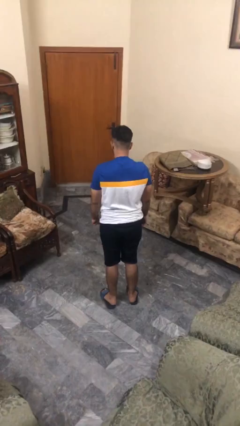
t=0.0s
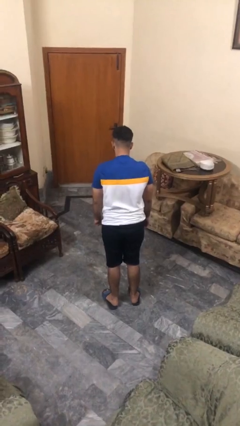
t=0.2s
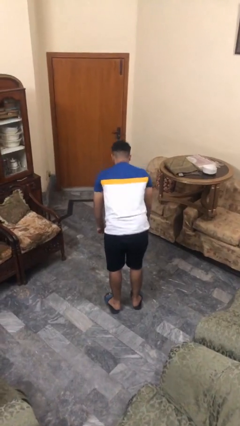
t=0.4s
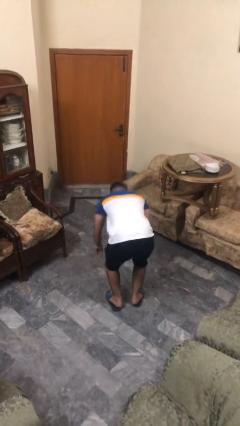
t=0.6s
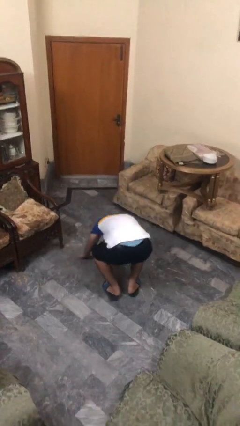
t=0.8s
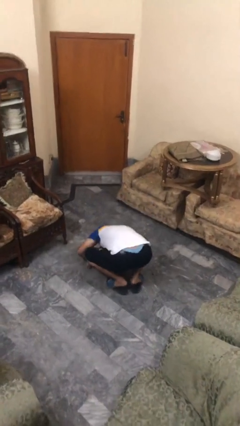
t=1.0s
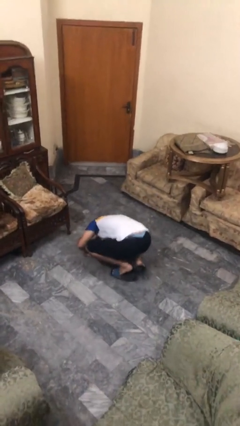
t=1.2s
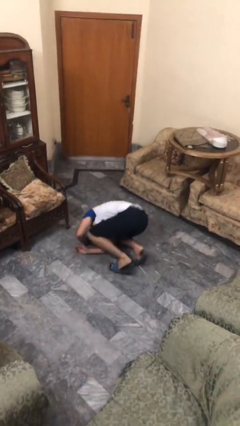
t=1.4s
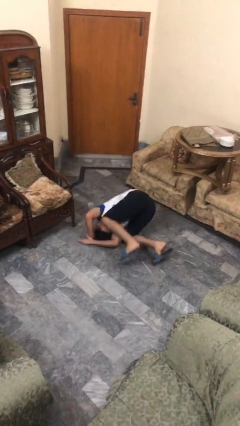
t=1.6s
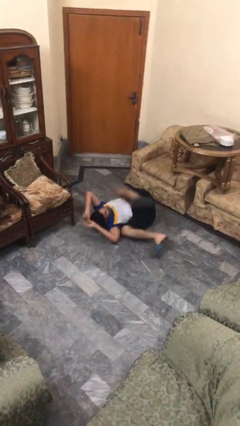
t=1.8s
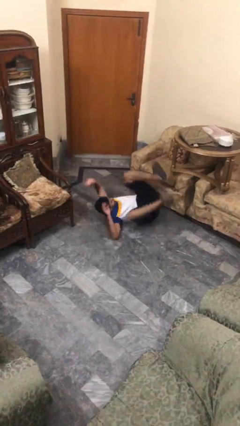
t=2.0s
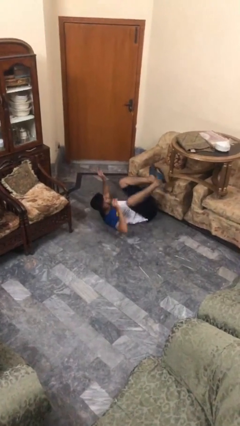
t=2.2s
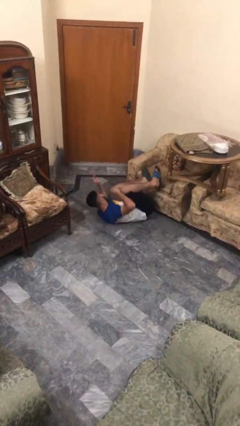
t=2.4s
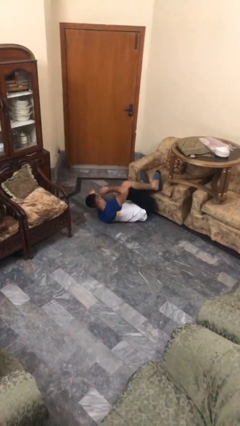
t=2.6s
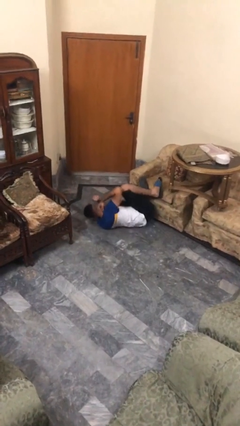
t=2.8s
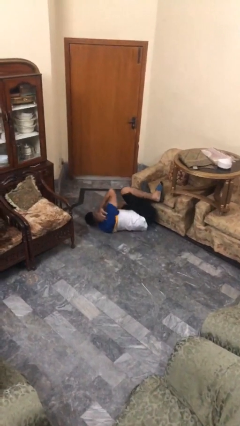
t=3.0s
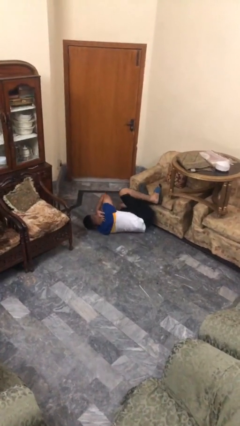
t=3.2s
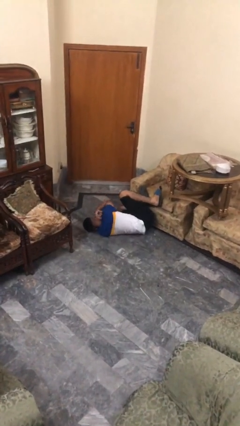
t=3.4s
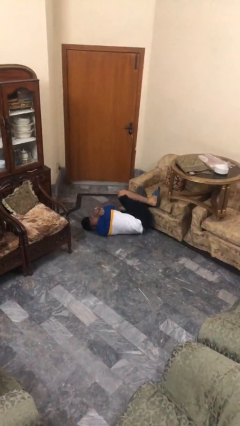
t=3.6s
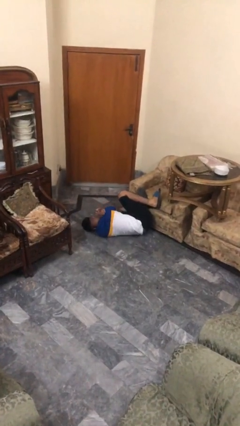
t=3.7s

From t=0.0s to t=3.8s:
person somersaults

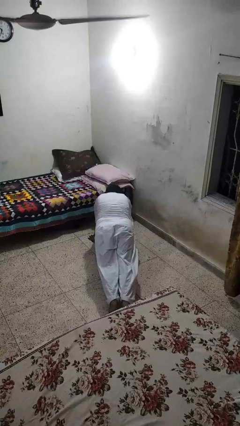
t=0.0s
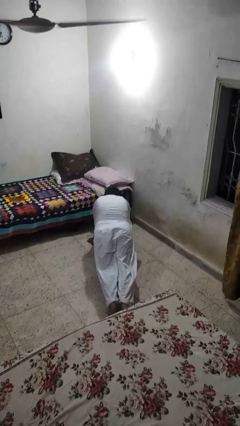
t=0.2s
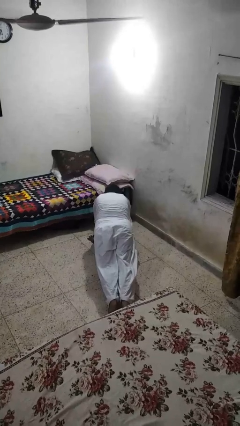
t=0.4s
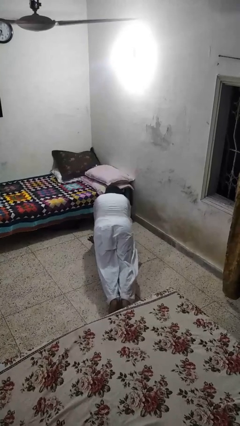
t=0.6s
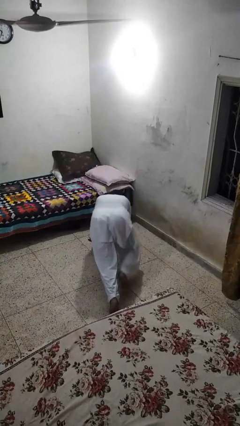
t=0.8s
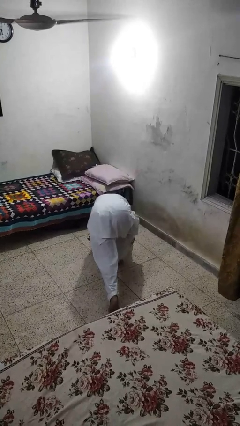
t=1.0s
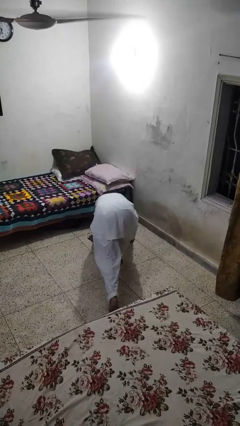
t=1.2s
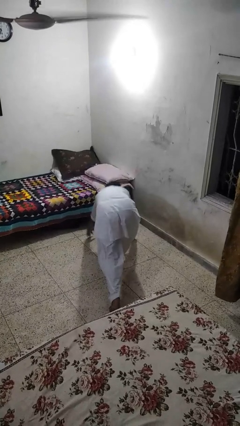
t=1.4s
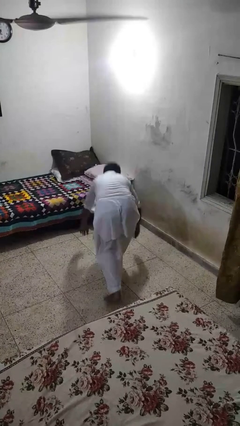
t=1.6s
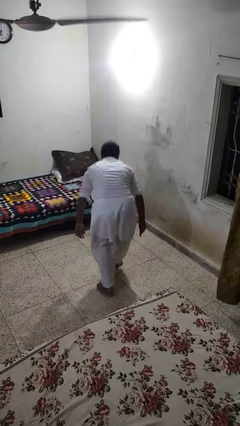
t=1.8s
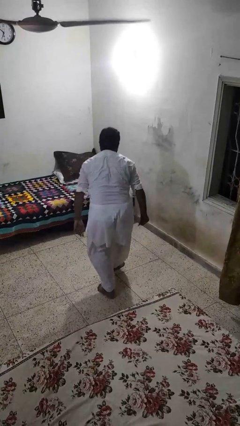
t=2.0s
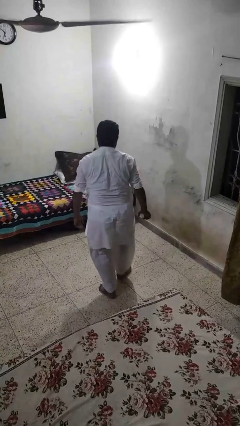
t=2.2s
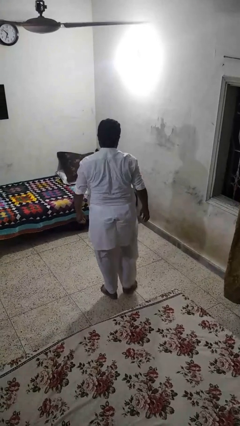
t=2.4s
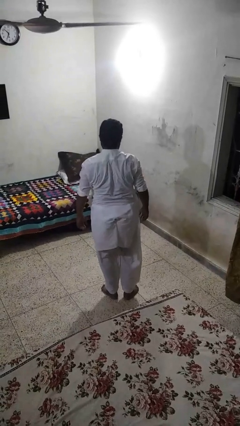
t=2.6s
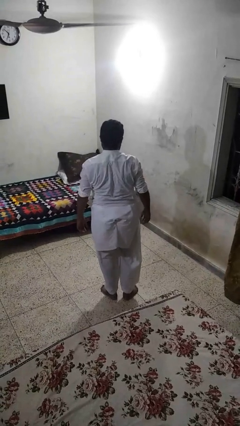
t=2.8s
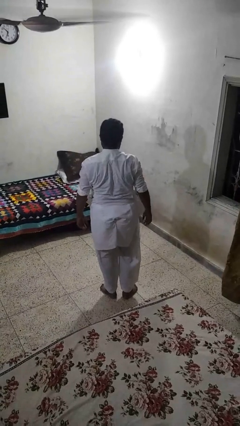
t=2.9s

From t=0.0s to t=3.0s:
person stands up from floor

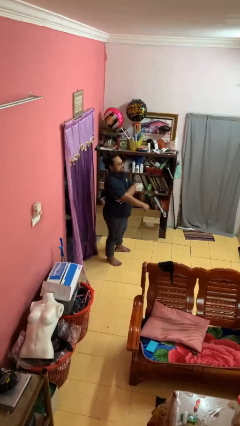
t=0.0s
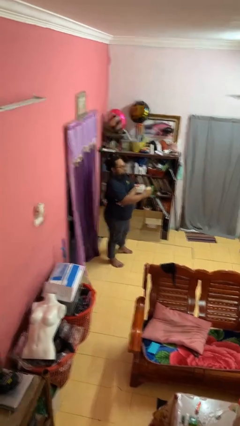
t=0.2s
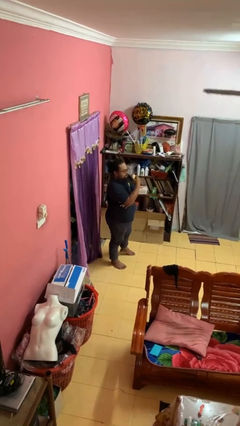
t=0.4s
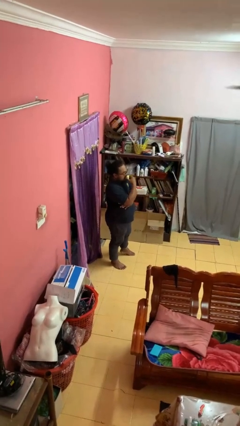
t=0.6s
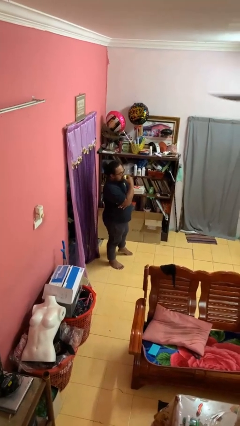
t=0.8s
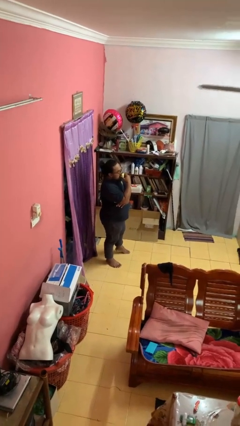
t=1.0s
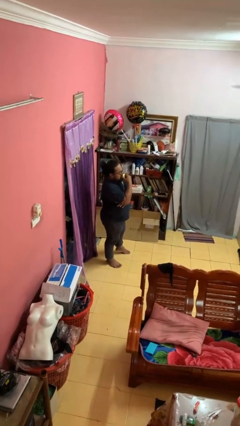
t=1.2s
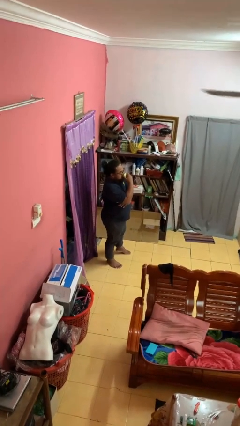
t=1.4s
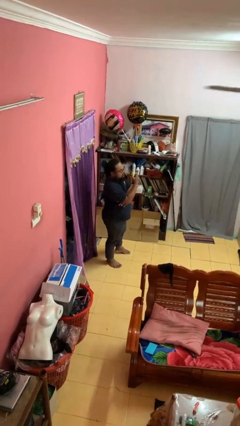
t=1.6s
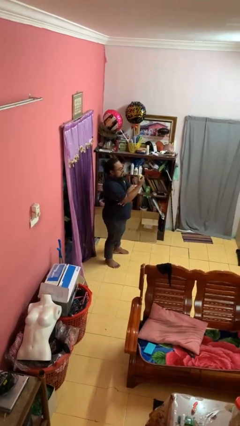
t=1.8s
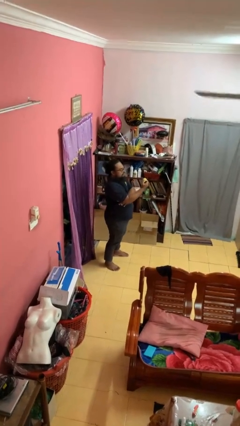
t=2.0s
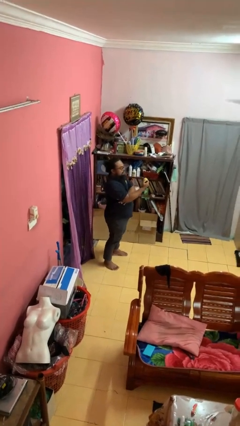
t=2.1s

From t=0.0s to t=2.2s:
person eats apple

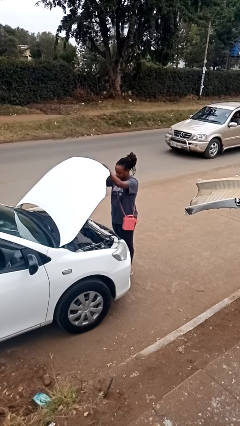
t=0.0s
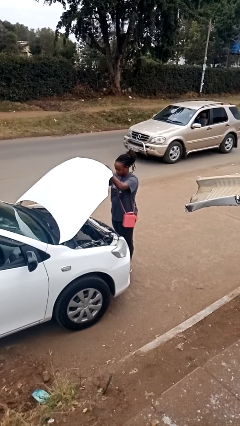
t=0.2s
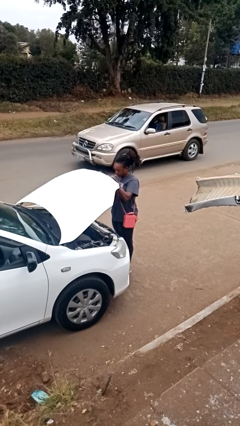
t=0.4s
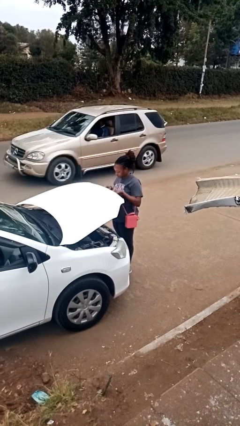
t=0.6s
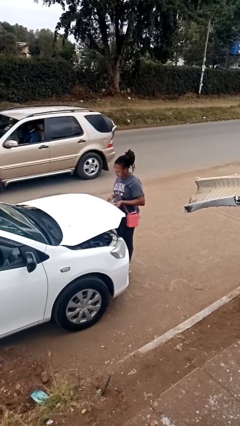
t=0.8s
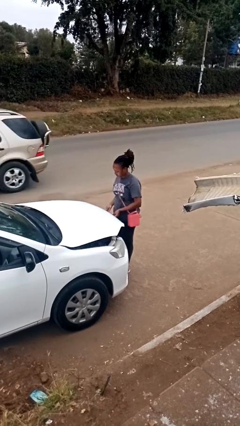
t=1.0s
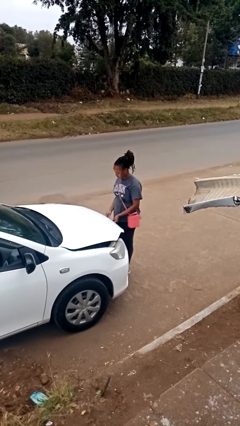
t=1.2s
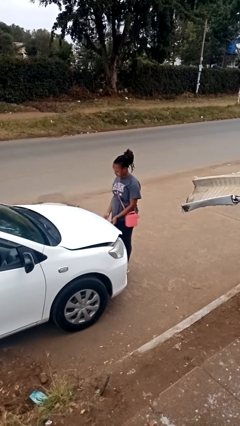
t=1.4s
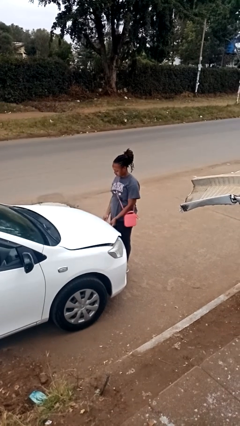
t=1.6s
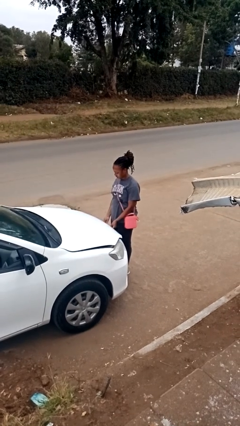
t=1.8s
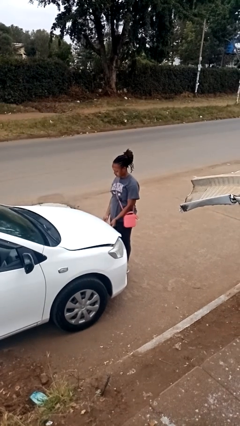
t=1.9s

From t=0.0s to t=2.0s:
person closes car hood

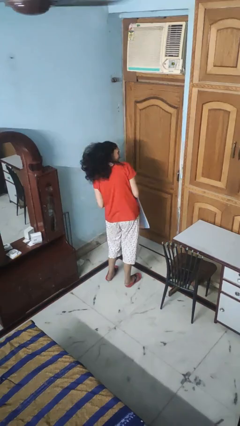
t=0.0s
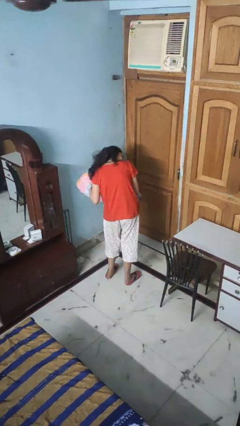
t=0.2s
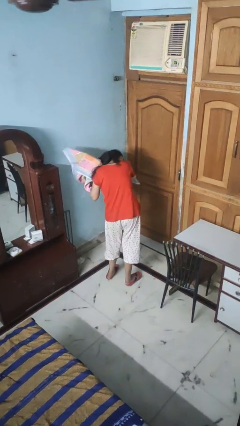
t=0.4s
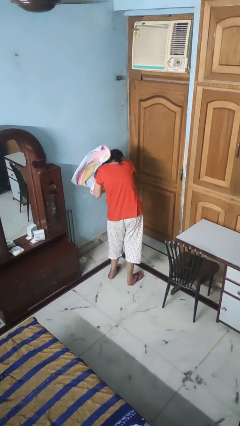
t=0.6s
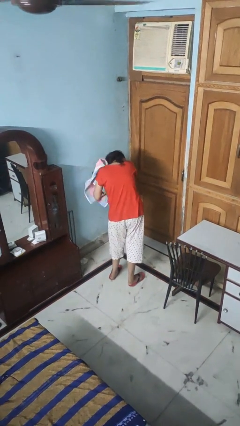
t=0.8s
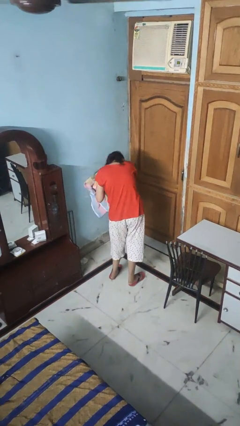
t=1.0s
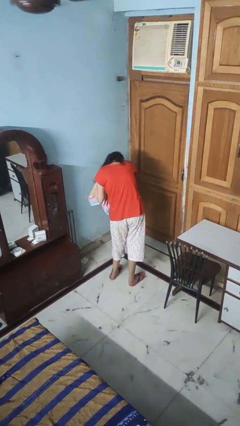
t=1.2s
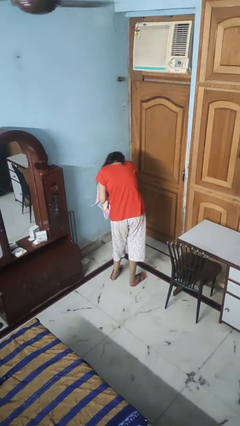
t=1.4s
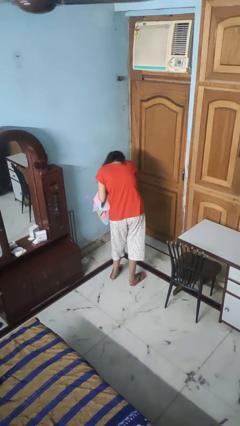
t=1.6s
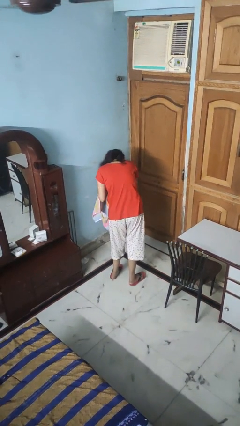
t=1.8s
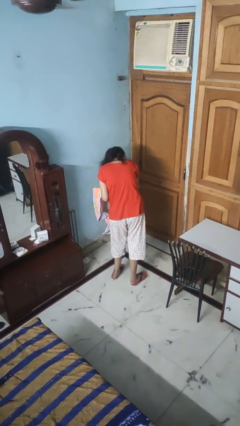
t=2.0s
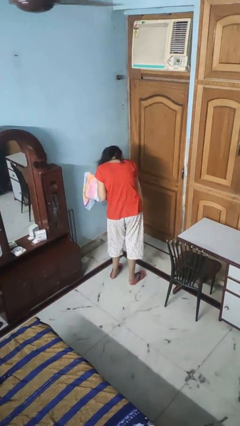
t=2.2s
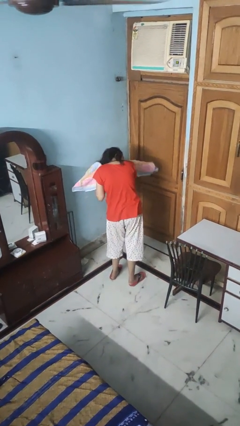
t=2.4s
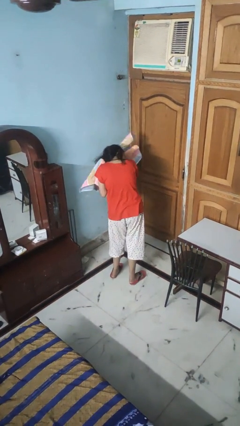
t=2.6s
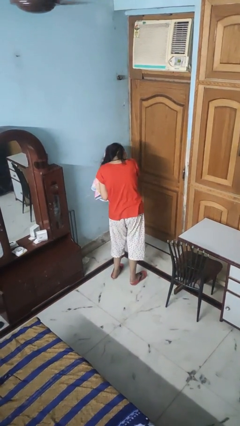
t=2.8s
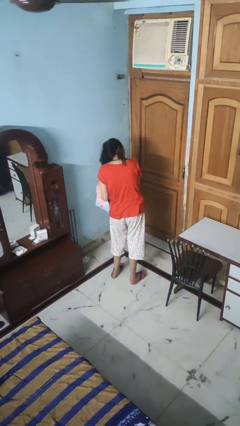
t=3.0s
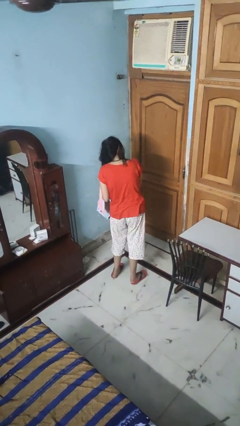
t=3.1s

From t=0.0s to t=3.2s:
person dries hair with towel

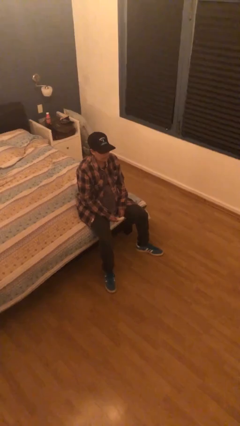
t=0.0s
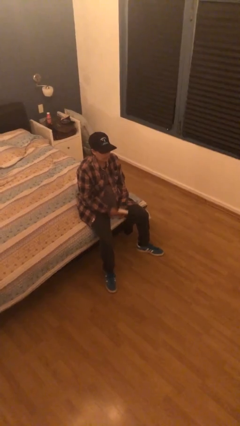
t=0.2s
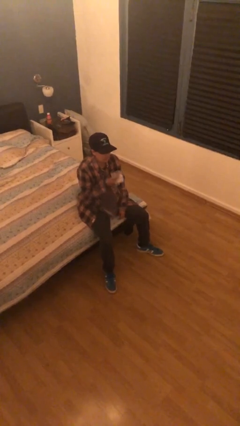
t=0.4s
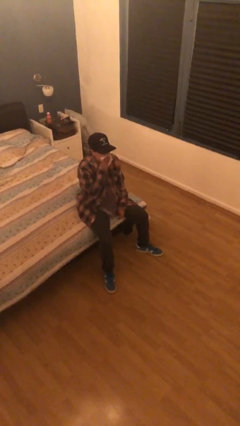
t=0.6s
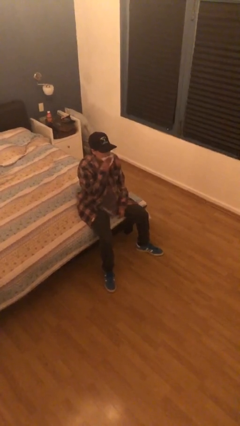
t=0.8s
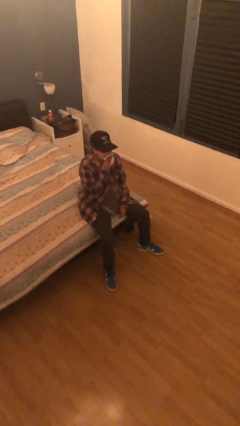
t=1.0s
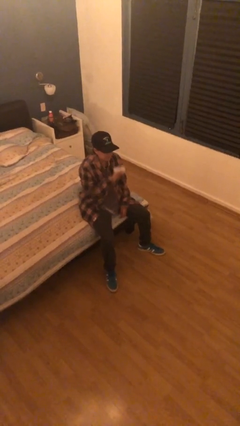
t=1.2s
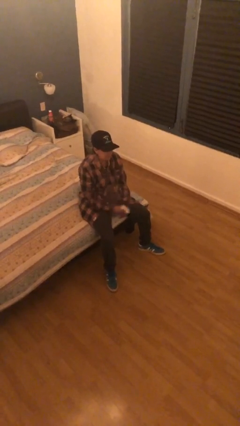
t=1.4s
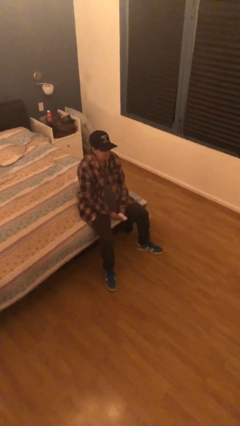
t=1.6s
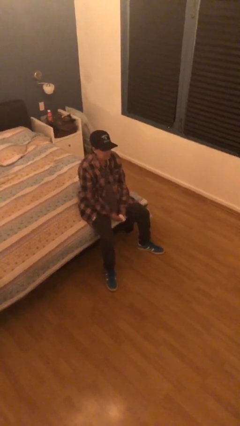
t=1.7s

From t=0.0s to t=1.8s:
person wipes mouth with napkin

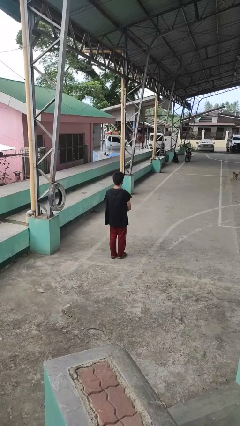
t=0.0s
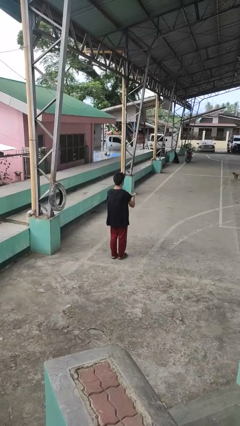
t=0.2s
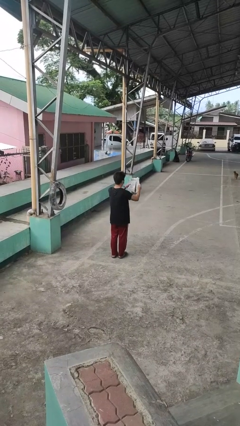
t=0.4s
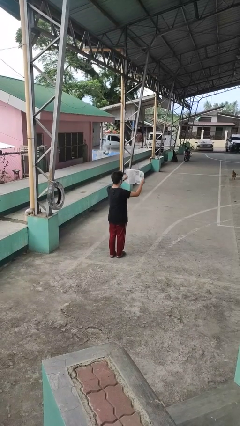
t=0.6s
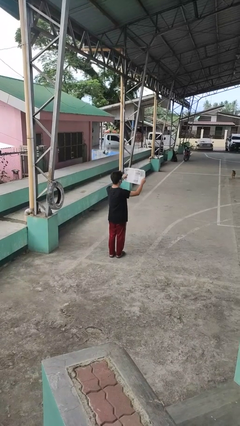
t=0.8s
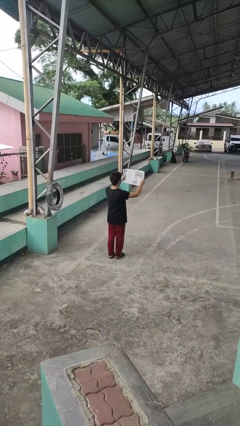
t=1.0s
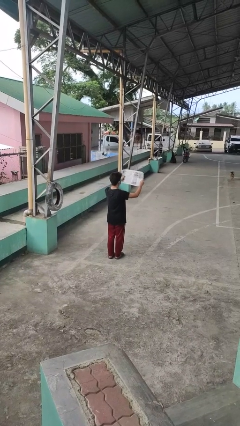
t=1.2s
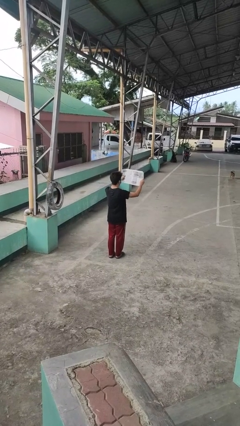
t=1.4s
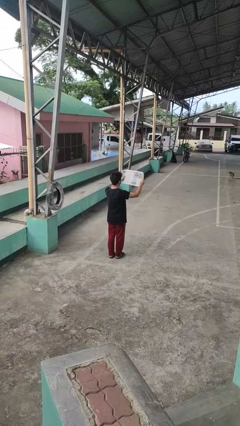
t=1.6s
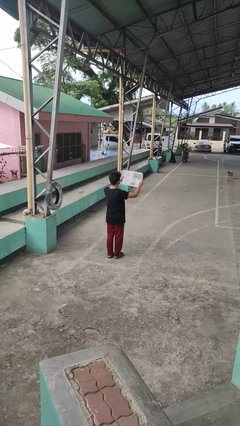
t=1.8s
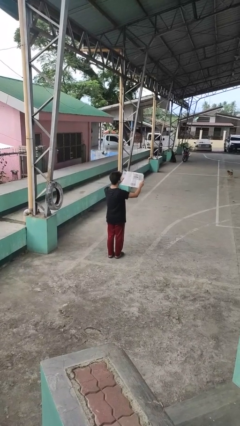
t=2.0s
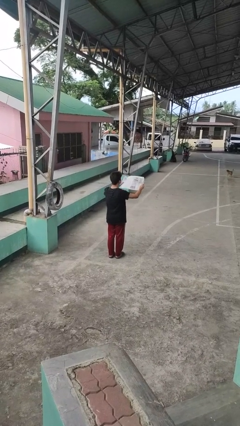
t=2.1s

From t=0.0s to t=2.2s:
person reads newspaper
